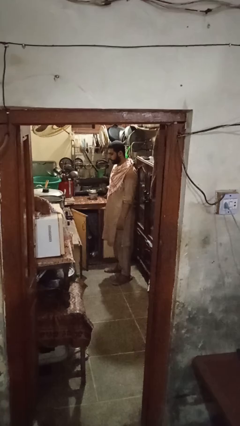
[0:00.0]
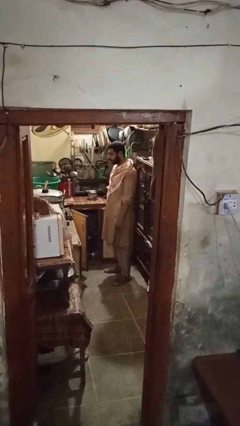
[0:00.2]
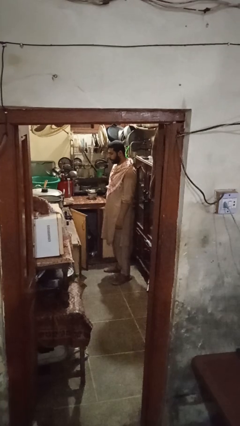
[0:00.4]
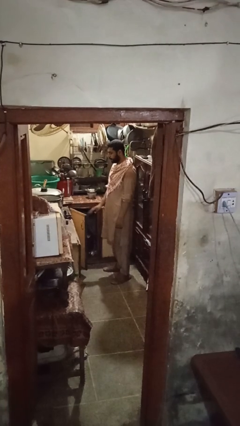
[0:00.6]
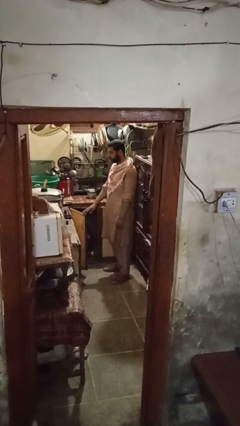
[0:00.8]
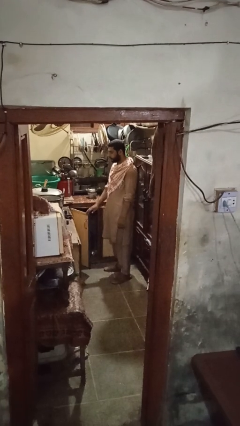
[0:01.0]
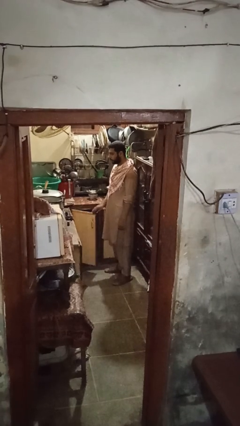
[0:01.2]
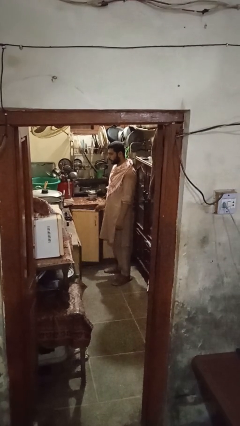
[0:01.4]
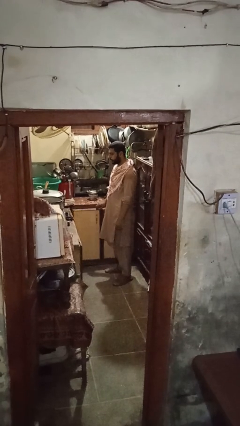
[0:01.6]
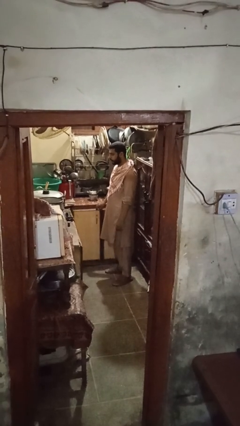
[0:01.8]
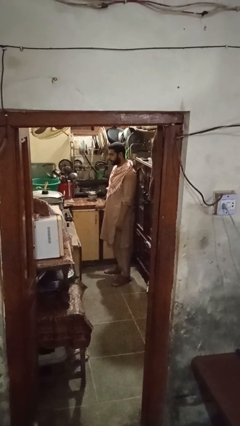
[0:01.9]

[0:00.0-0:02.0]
person closes cabinet

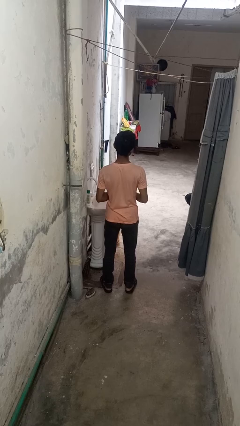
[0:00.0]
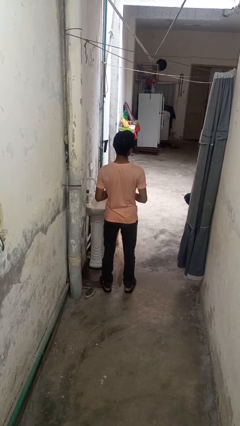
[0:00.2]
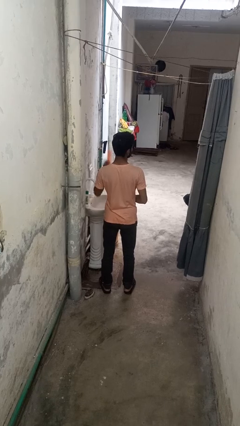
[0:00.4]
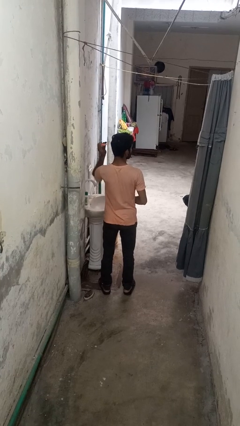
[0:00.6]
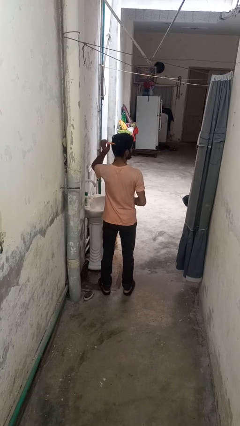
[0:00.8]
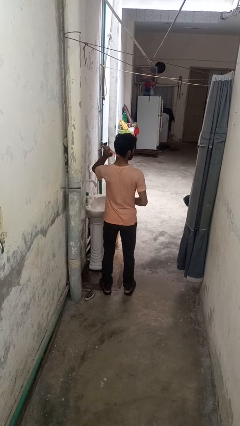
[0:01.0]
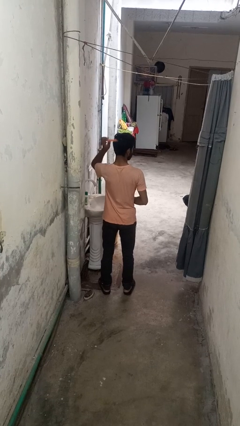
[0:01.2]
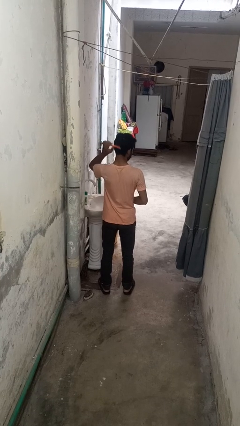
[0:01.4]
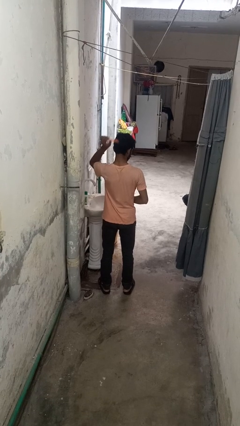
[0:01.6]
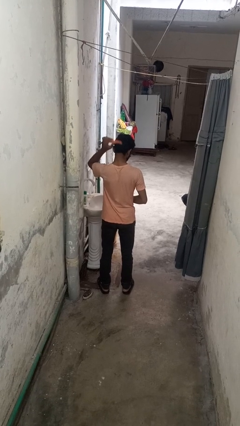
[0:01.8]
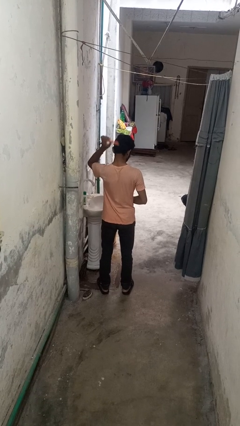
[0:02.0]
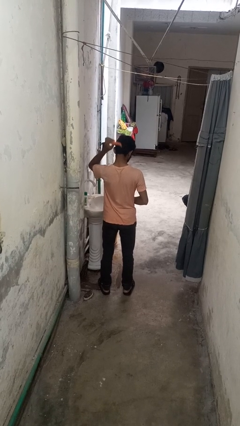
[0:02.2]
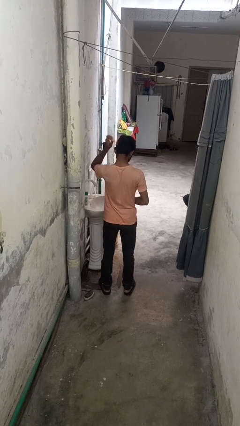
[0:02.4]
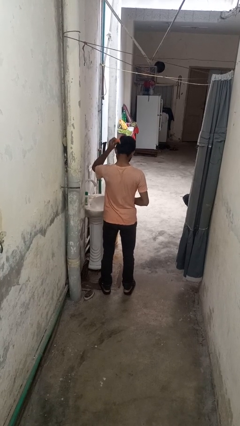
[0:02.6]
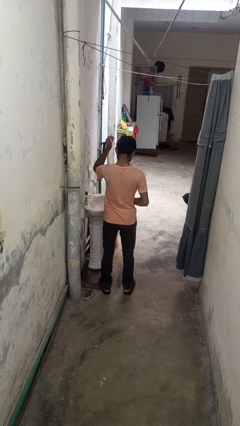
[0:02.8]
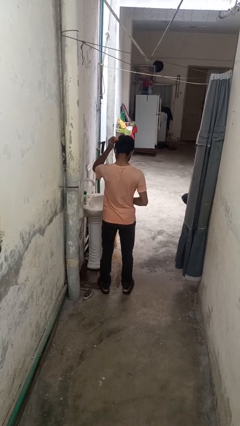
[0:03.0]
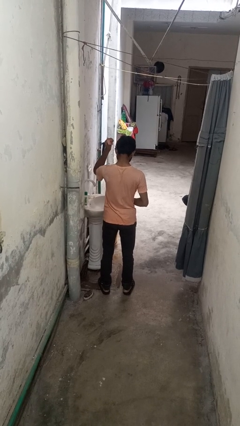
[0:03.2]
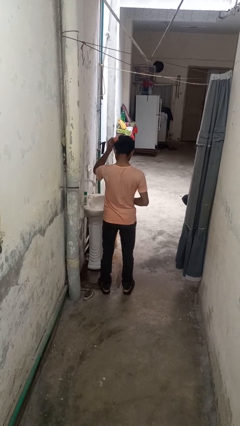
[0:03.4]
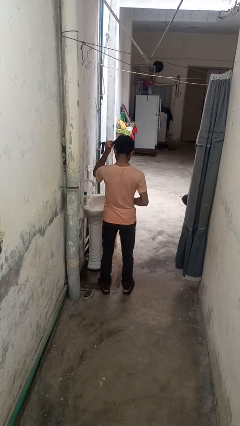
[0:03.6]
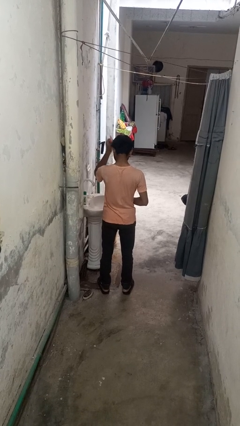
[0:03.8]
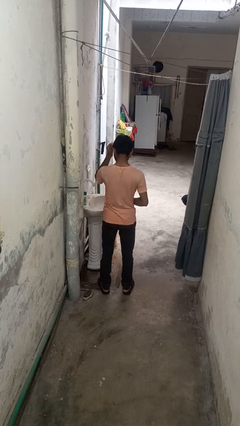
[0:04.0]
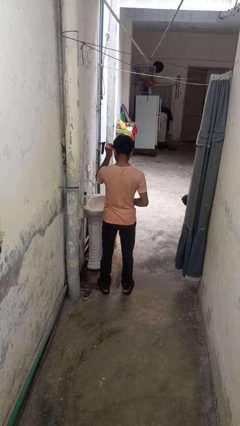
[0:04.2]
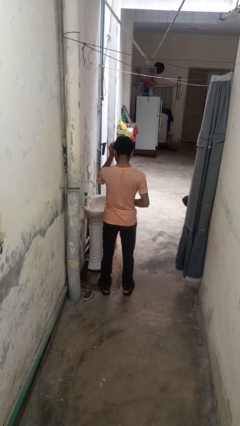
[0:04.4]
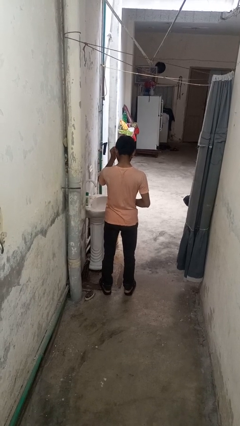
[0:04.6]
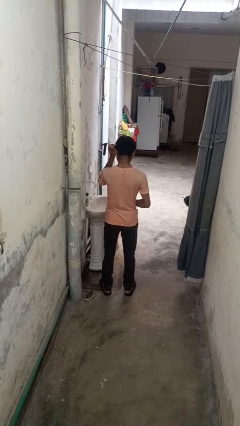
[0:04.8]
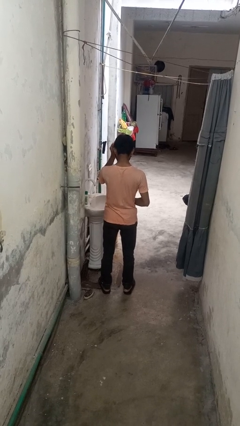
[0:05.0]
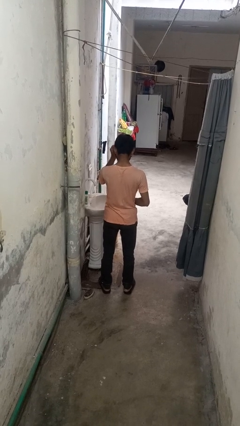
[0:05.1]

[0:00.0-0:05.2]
person brushes hair

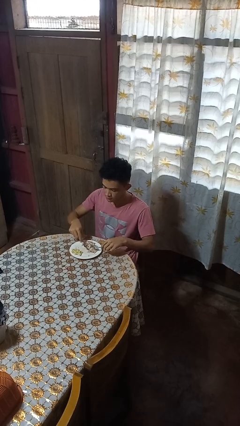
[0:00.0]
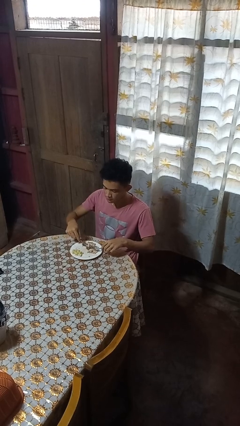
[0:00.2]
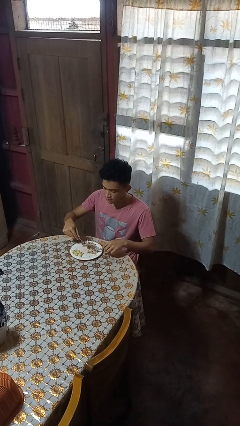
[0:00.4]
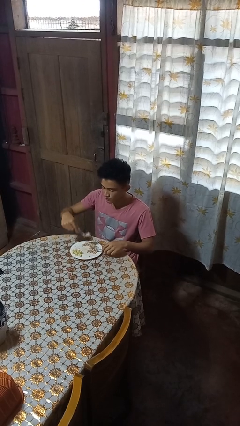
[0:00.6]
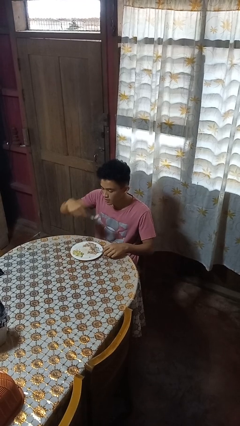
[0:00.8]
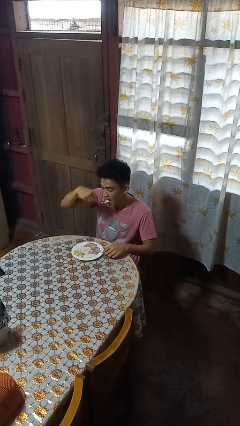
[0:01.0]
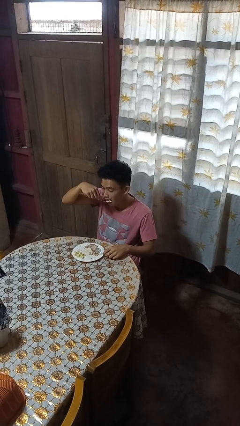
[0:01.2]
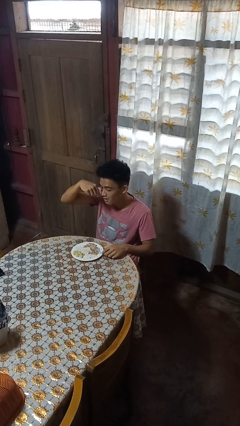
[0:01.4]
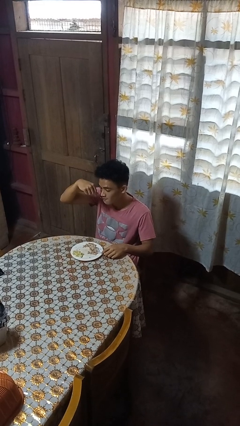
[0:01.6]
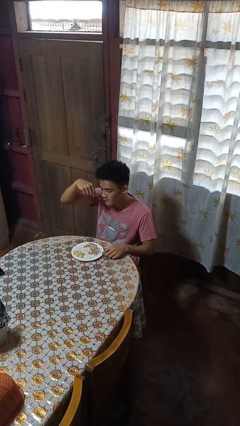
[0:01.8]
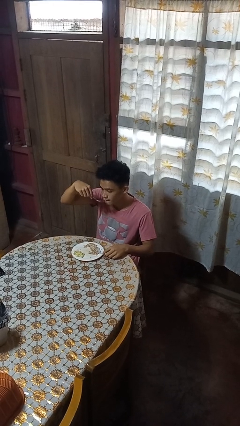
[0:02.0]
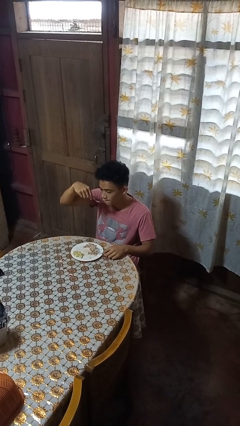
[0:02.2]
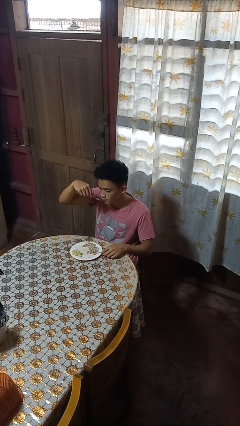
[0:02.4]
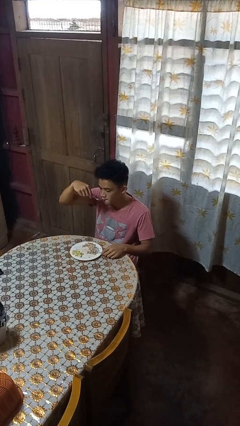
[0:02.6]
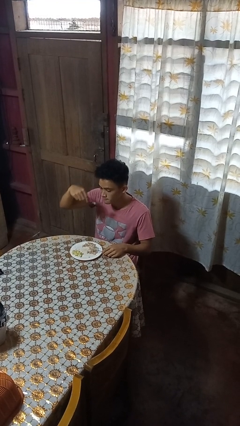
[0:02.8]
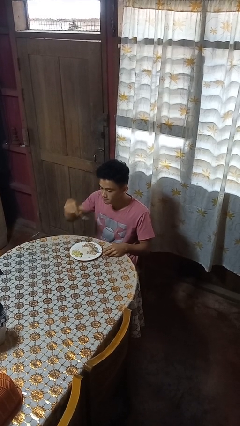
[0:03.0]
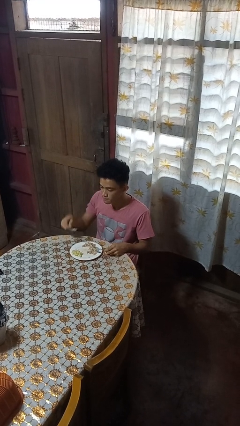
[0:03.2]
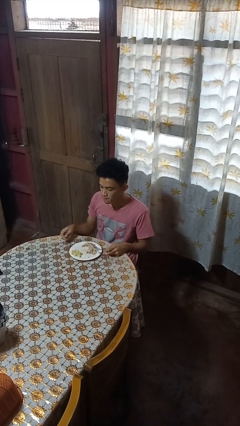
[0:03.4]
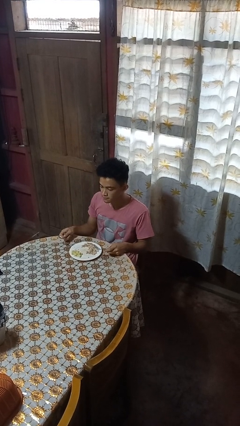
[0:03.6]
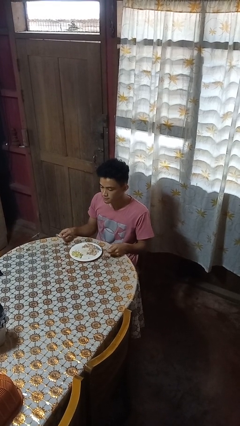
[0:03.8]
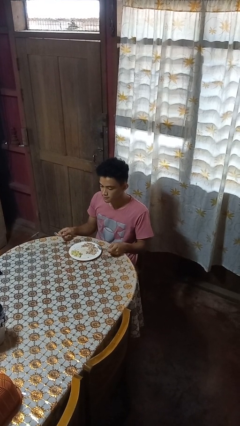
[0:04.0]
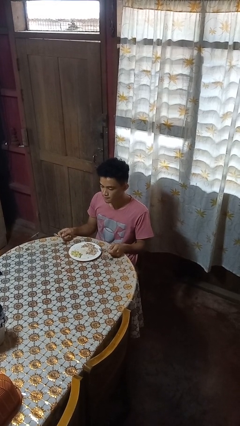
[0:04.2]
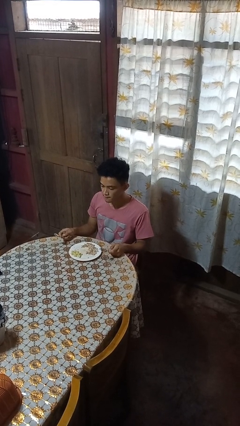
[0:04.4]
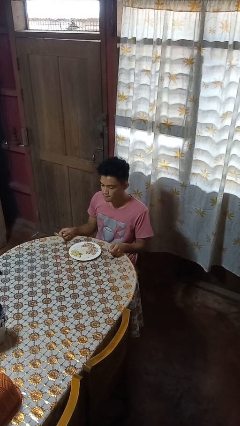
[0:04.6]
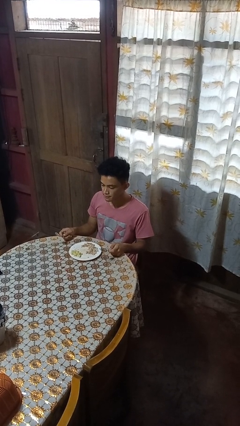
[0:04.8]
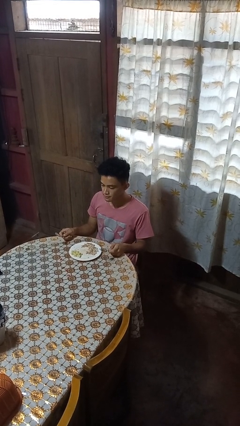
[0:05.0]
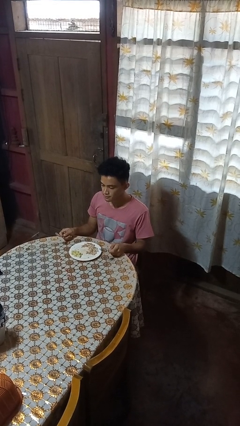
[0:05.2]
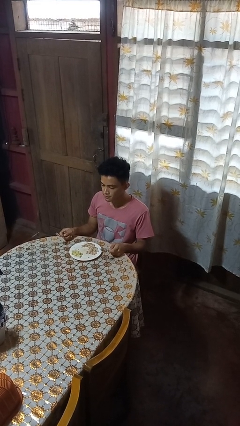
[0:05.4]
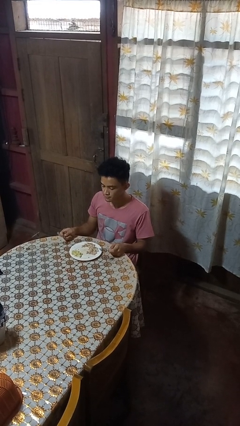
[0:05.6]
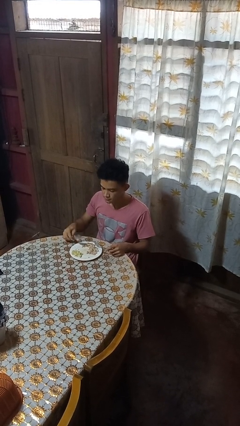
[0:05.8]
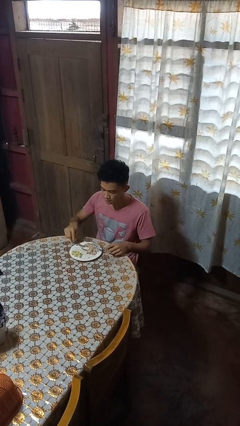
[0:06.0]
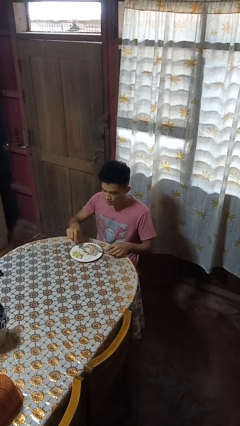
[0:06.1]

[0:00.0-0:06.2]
person eats with utensil

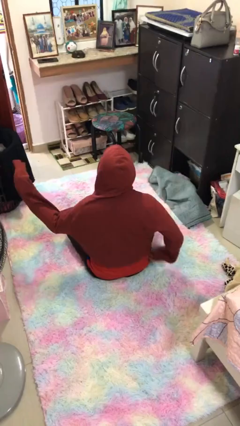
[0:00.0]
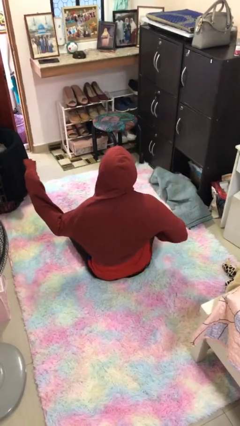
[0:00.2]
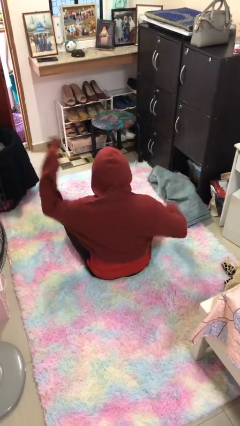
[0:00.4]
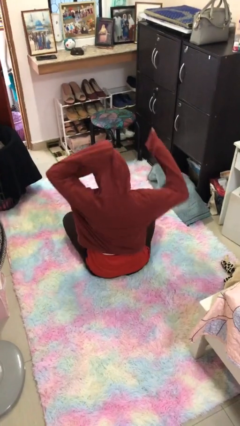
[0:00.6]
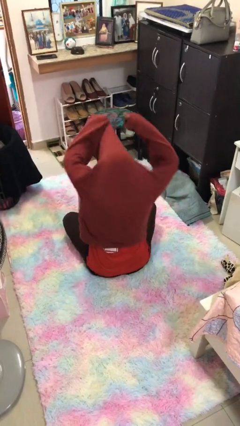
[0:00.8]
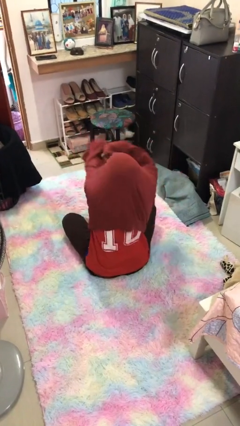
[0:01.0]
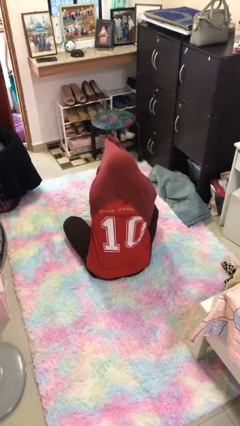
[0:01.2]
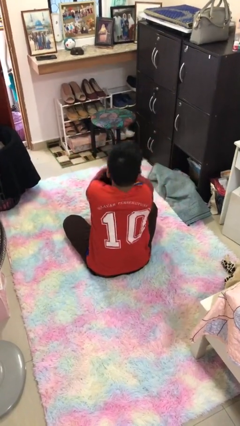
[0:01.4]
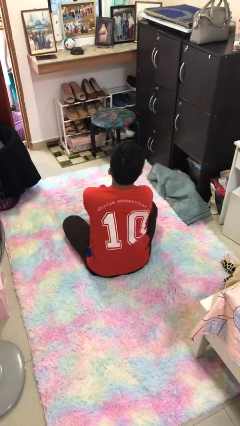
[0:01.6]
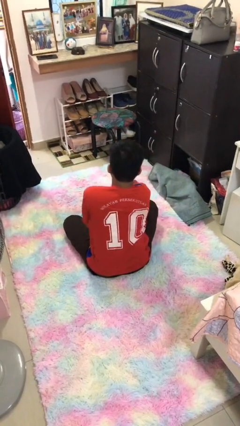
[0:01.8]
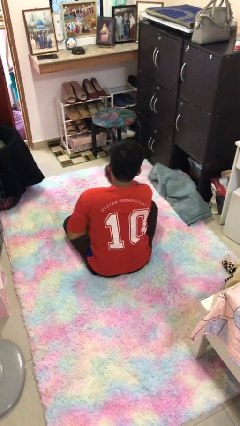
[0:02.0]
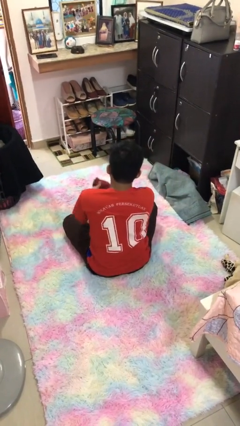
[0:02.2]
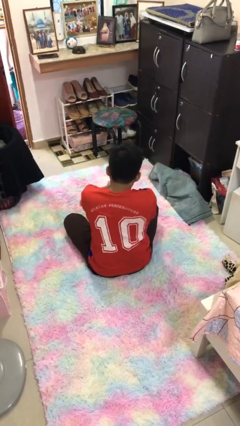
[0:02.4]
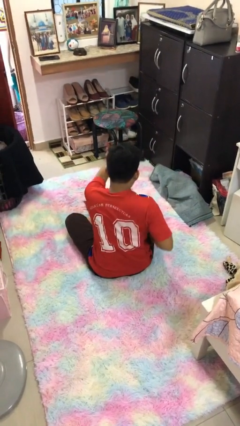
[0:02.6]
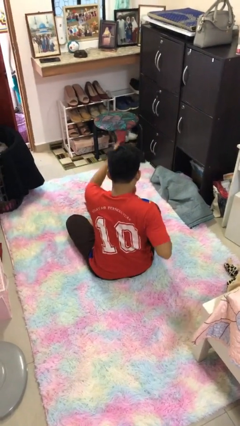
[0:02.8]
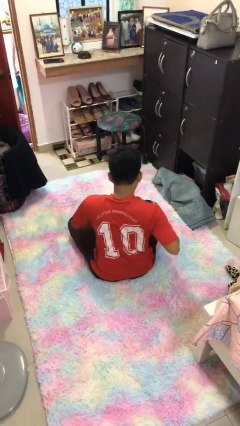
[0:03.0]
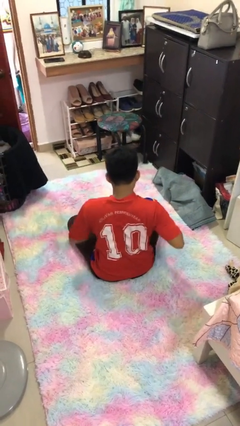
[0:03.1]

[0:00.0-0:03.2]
person takes off hoodie

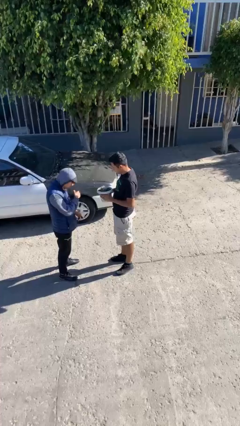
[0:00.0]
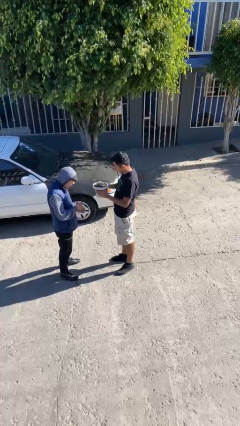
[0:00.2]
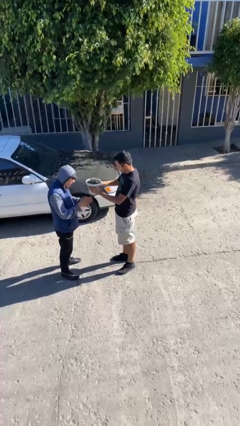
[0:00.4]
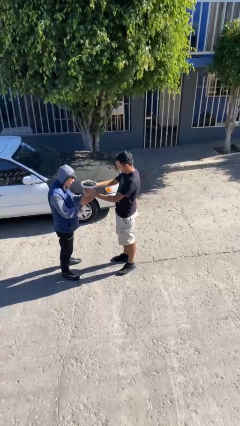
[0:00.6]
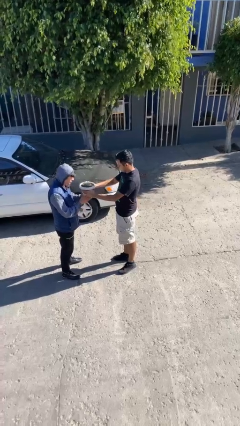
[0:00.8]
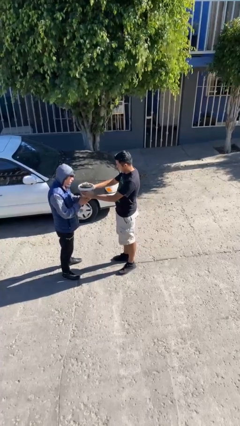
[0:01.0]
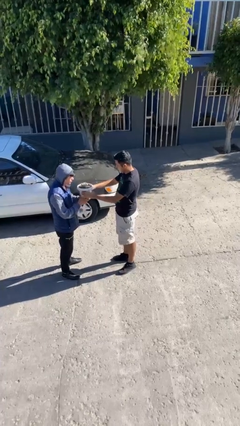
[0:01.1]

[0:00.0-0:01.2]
person transfers object to person
